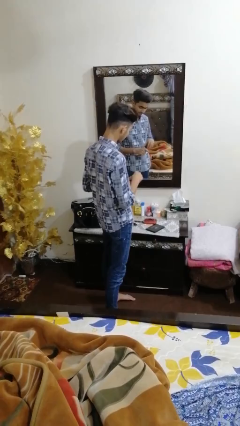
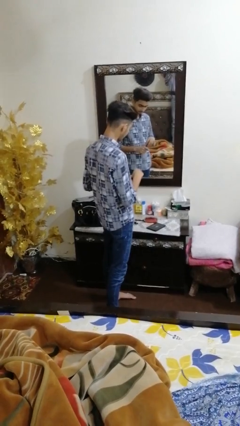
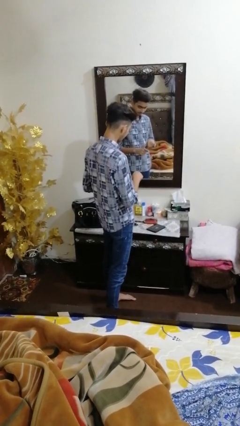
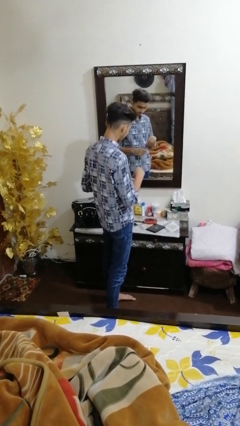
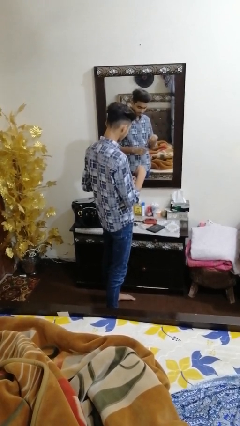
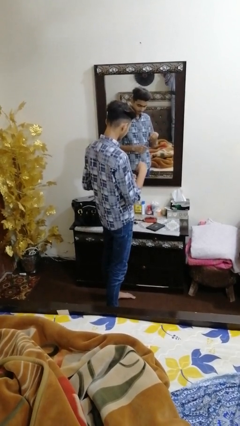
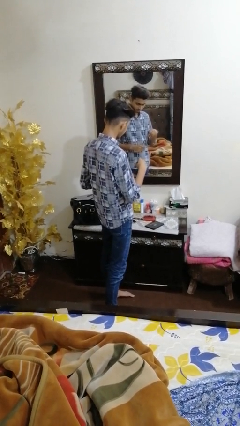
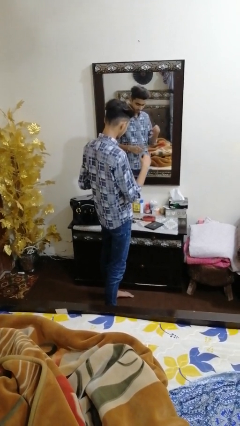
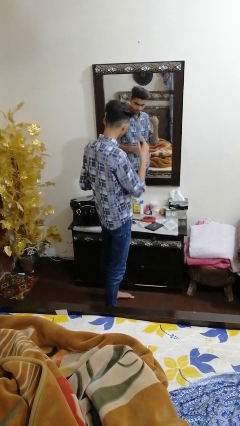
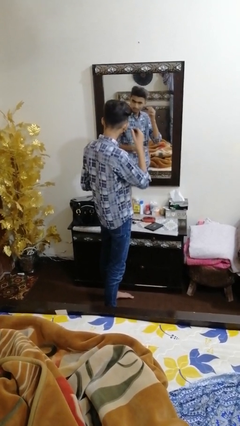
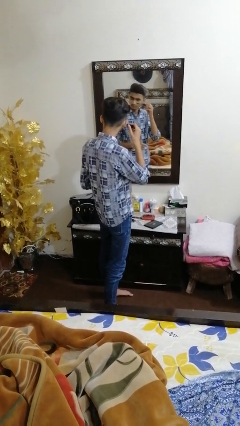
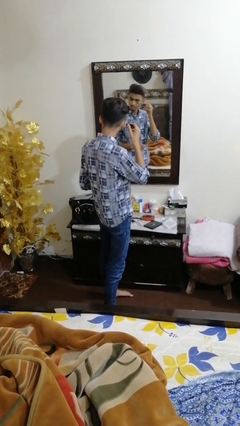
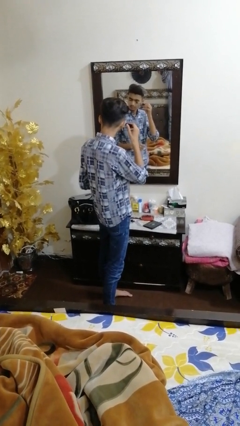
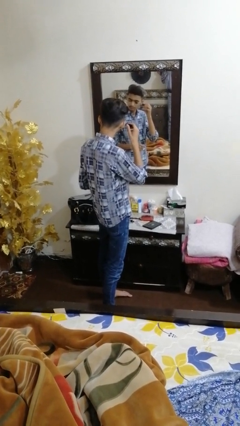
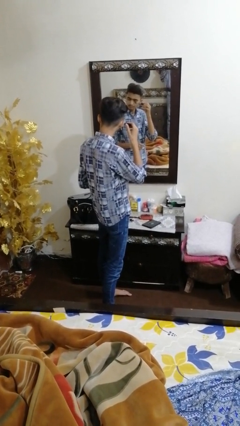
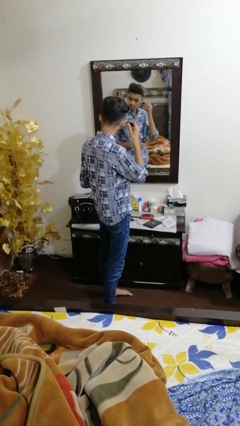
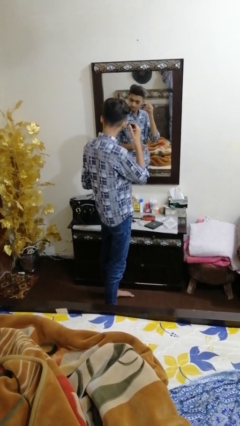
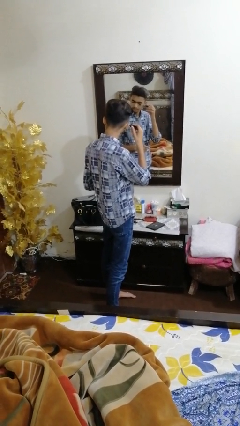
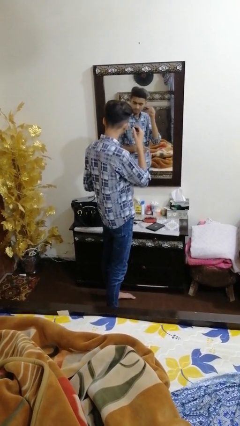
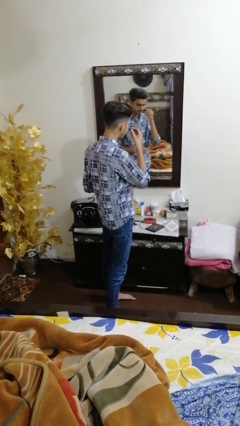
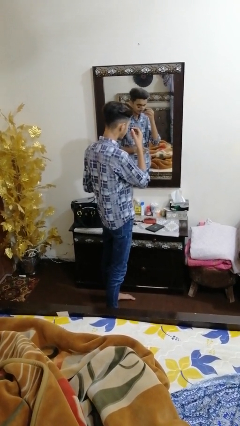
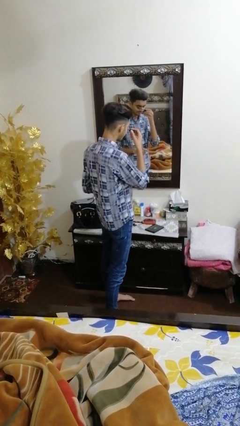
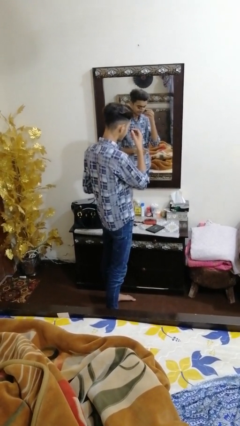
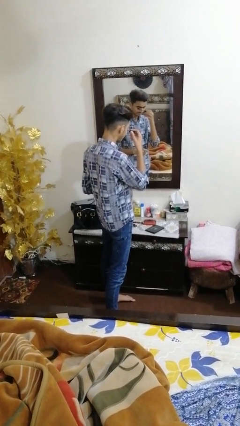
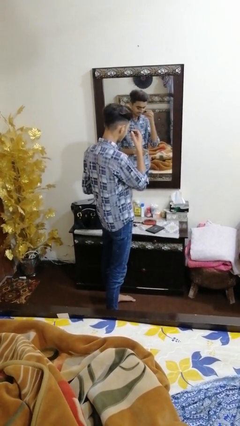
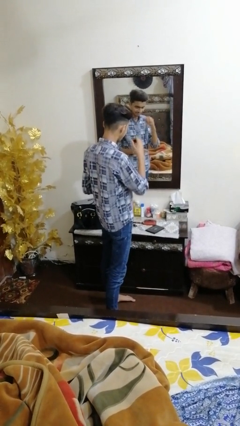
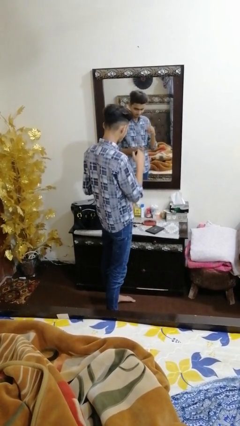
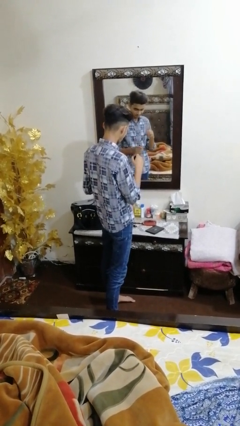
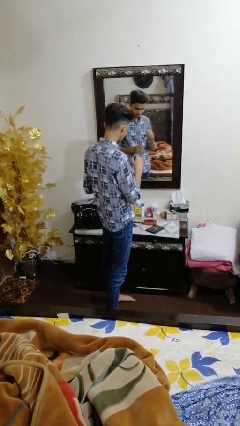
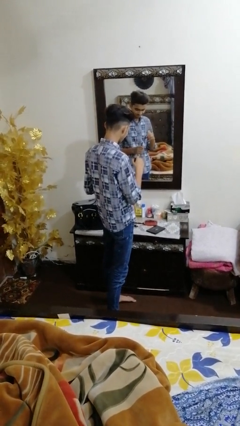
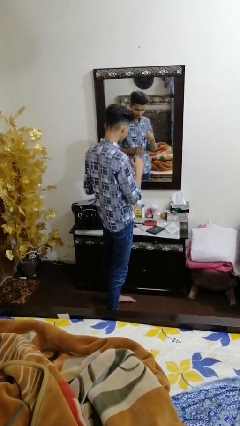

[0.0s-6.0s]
person applies eye makeup

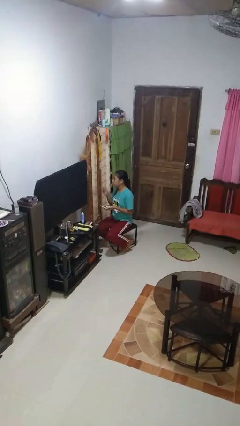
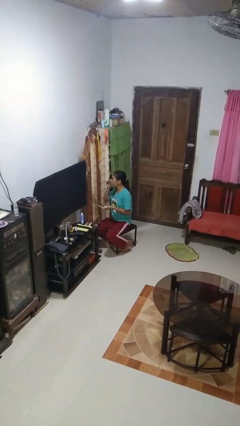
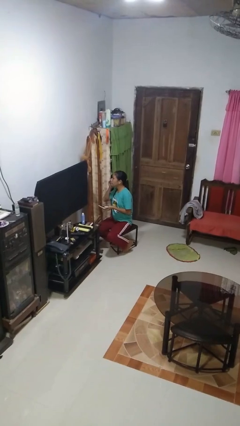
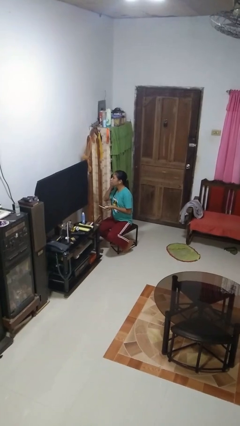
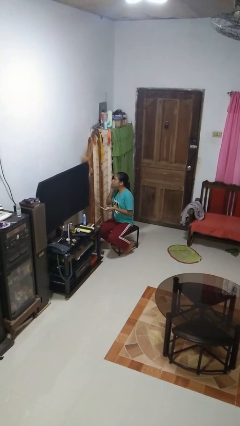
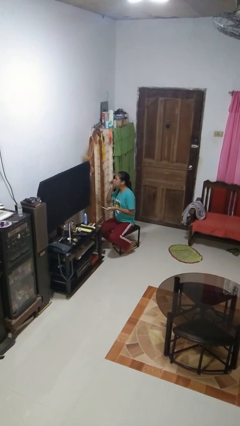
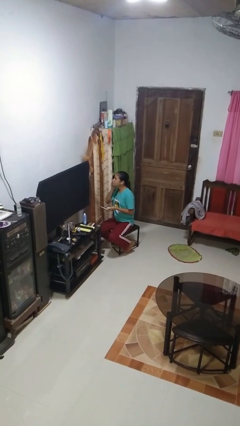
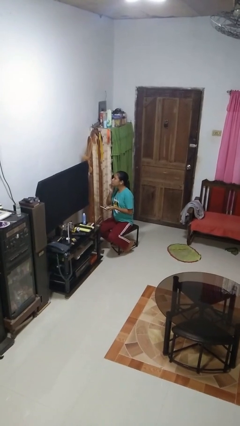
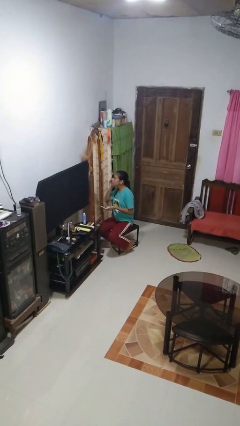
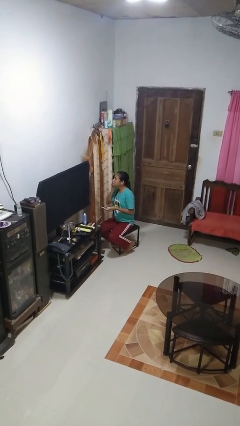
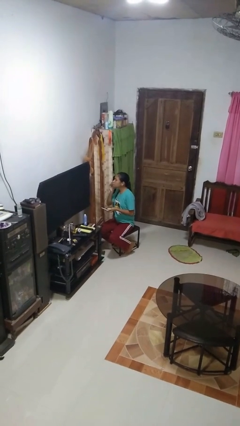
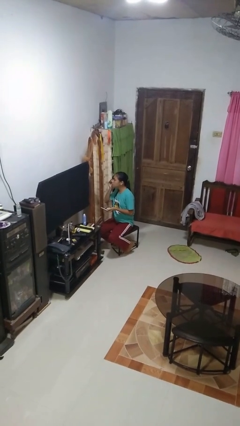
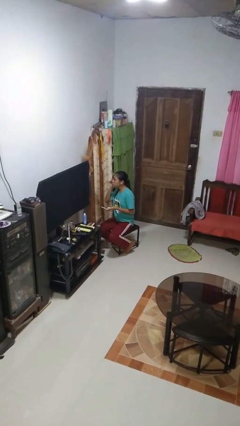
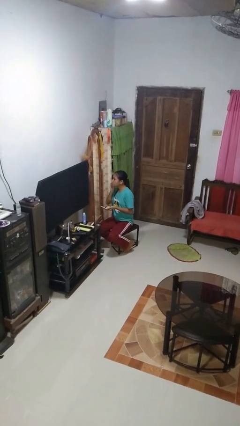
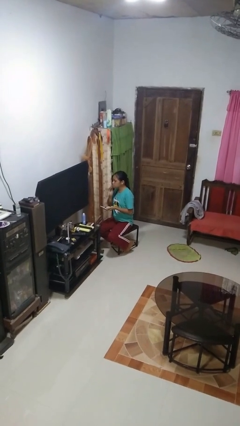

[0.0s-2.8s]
person applies foundation makeup

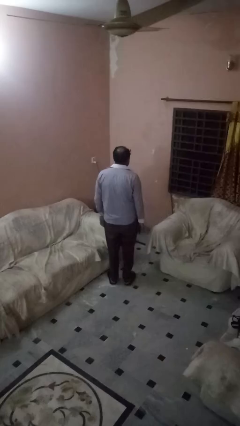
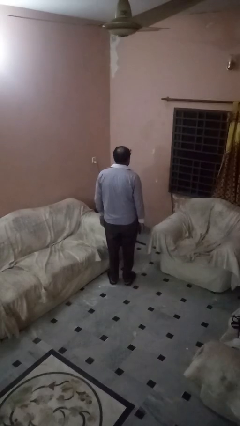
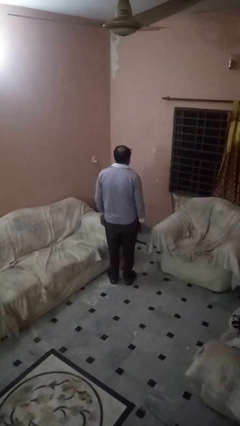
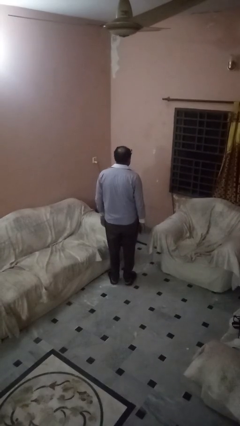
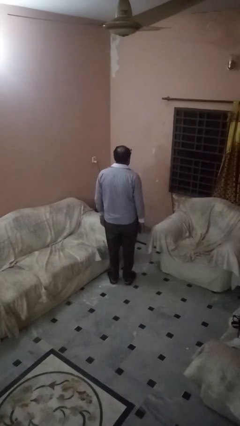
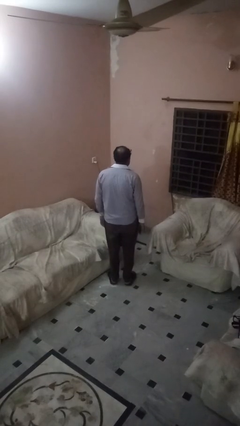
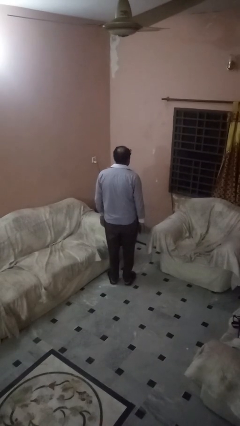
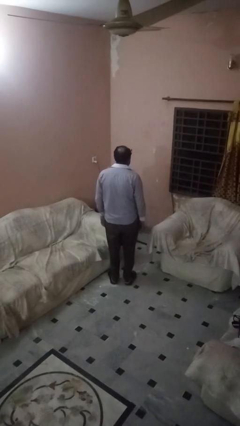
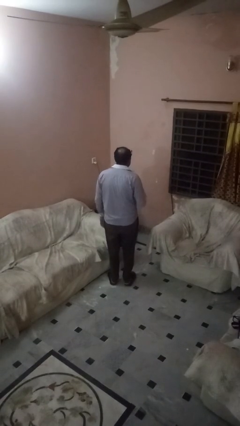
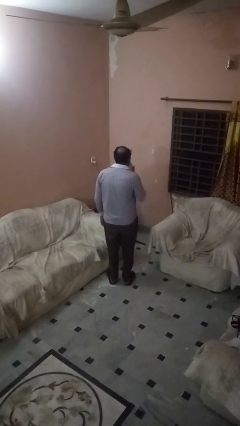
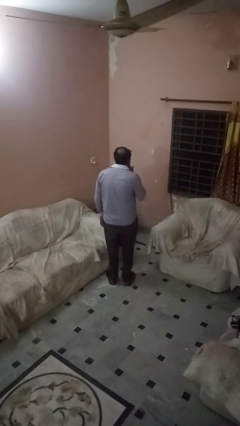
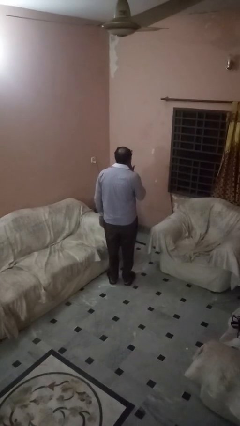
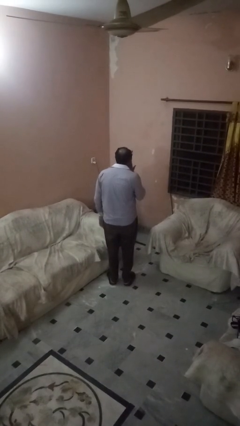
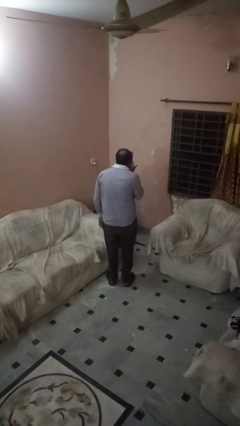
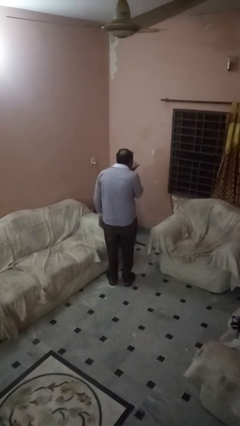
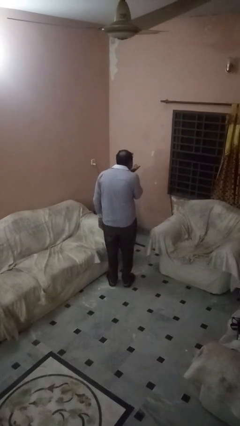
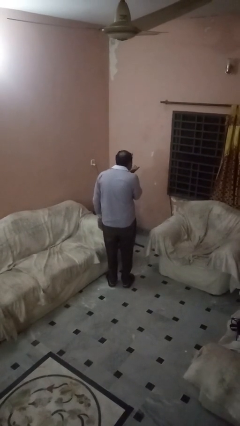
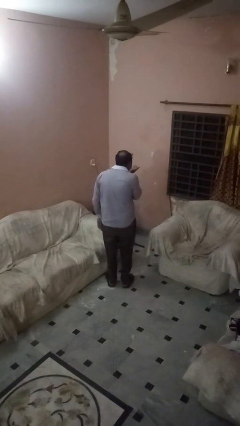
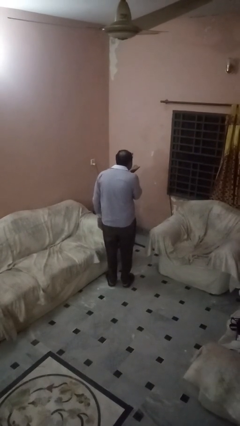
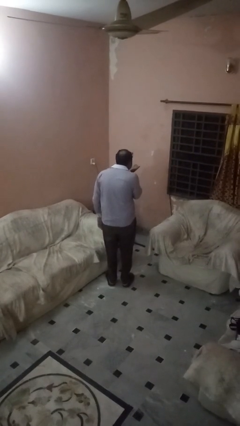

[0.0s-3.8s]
person gestures blow kiss

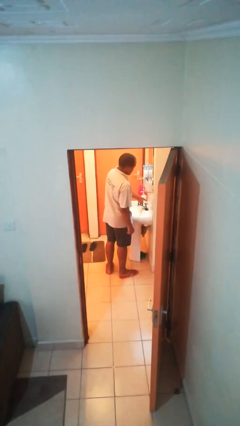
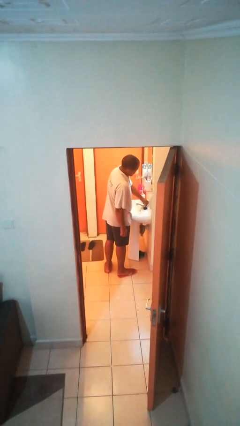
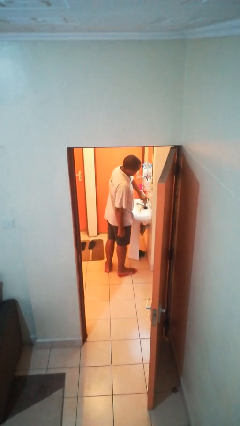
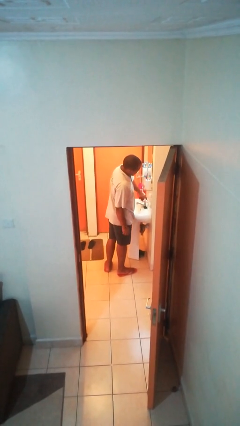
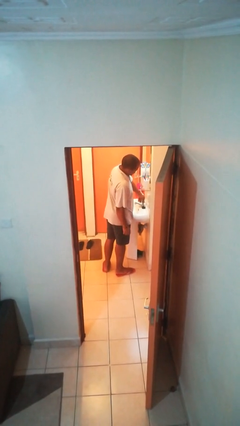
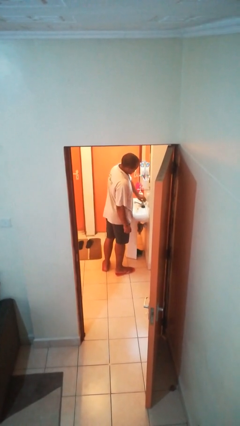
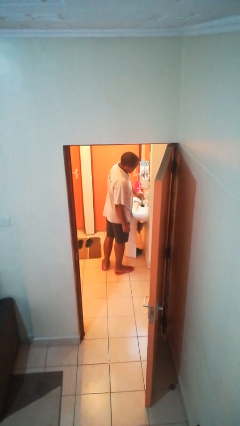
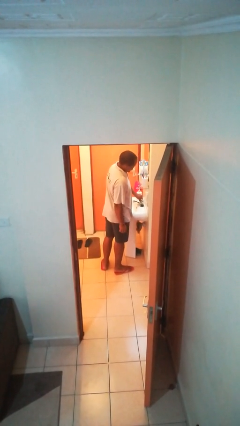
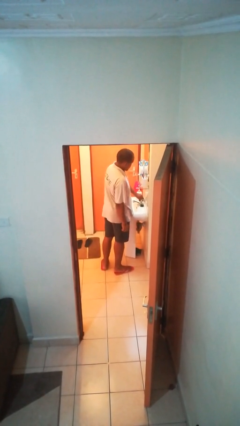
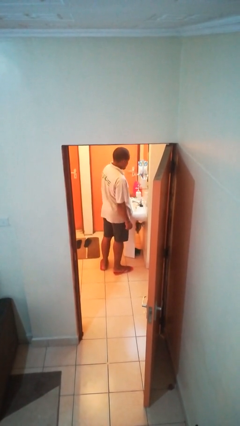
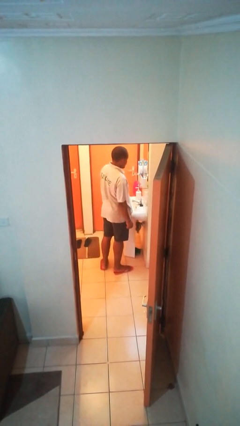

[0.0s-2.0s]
person turns off faucet

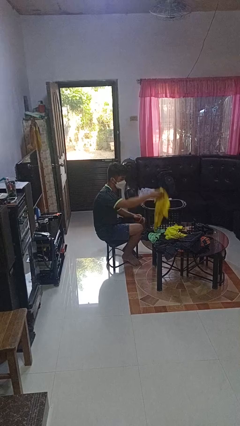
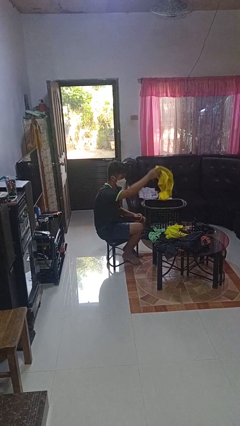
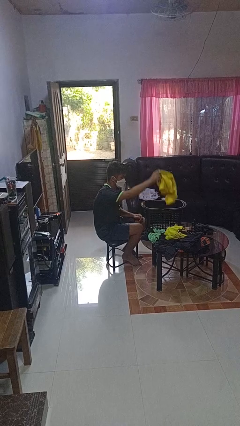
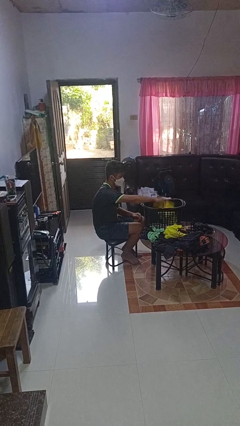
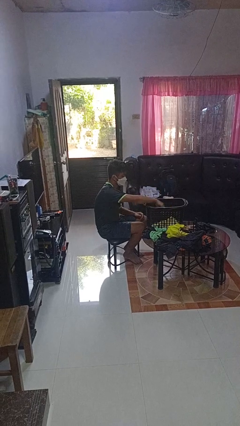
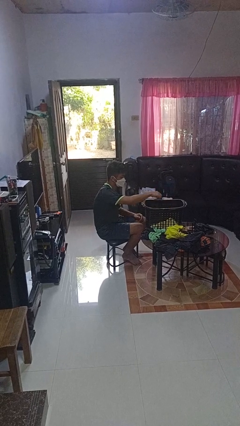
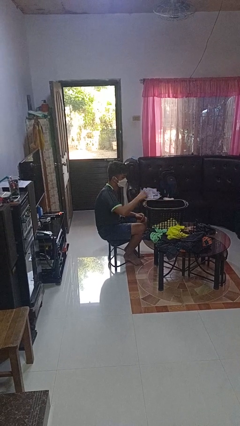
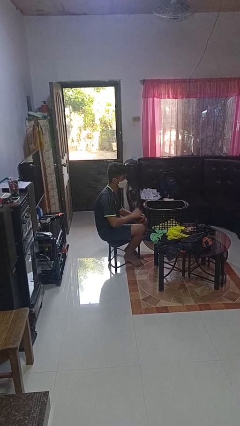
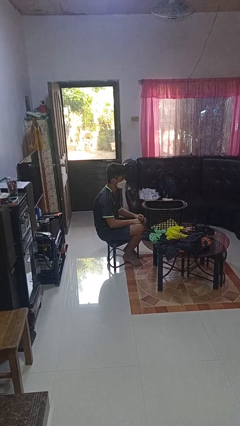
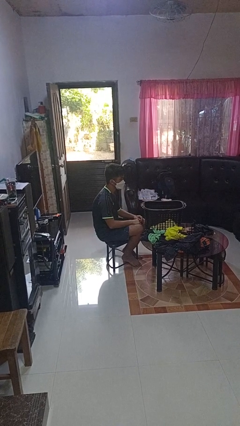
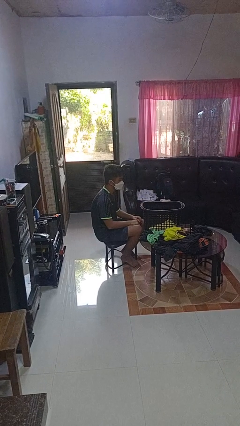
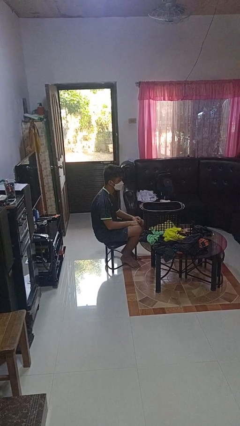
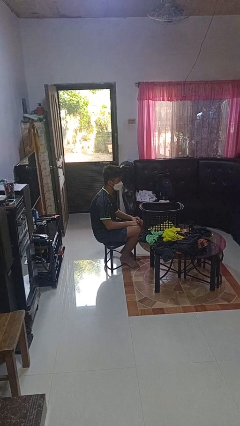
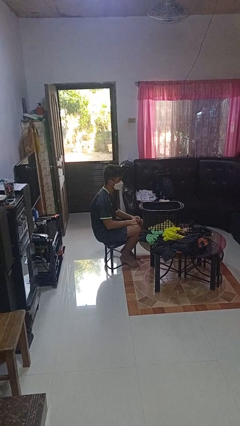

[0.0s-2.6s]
person puts object into basket
